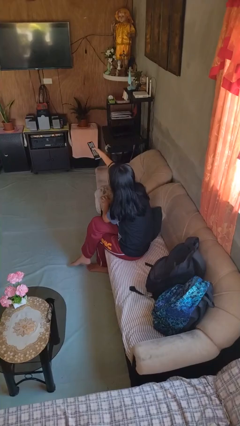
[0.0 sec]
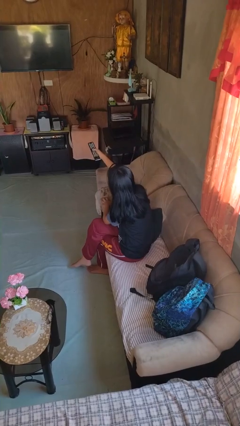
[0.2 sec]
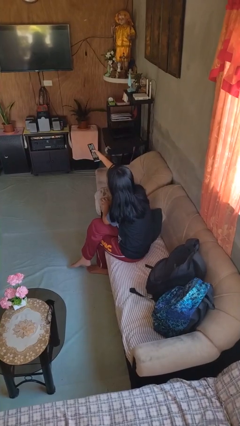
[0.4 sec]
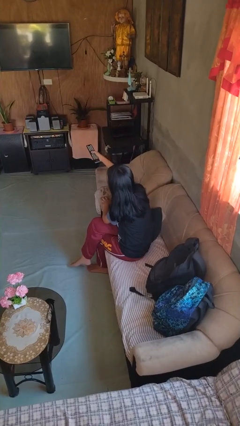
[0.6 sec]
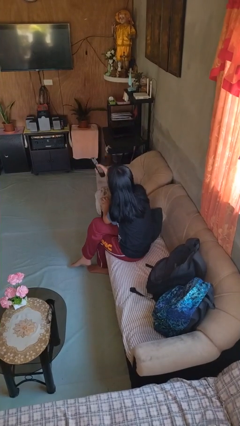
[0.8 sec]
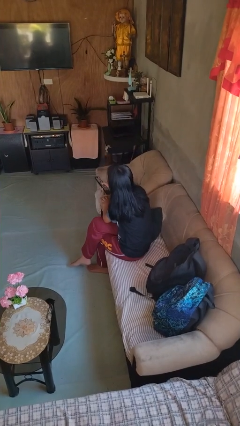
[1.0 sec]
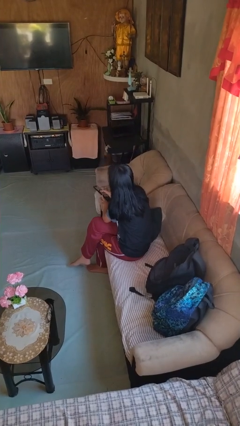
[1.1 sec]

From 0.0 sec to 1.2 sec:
person uses television remote

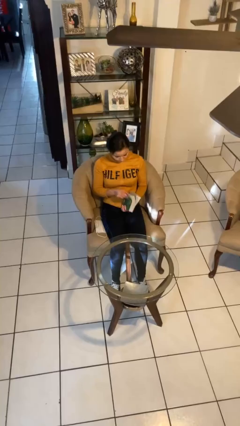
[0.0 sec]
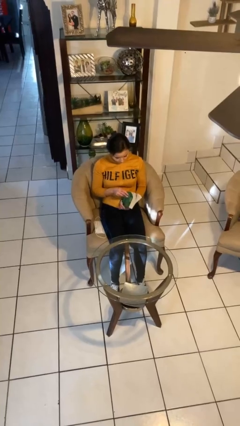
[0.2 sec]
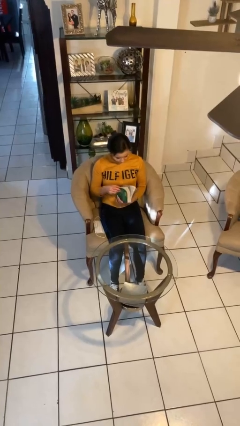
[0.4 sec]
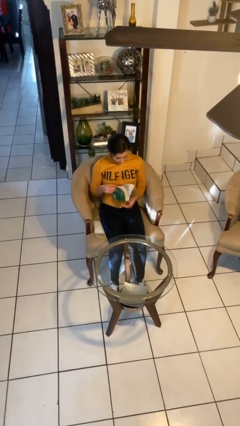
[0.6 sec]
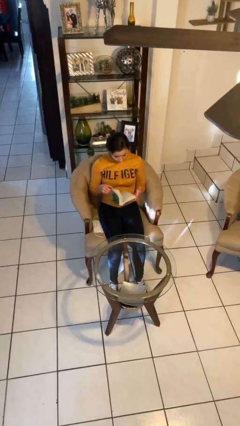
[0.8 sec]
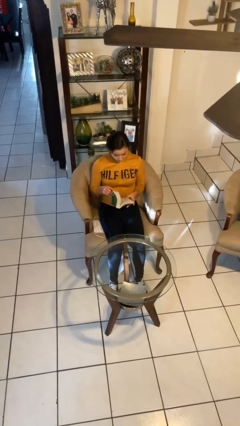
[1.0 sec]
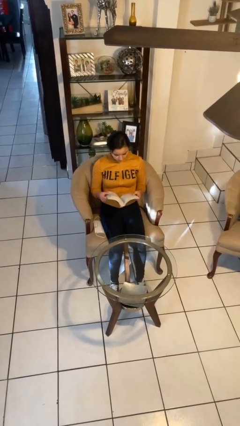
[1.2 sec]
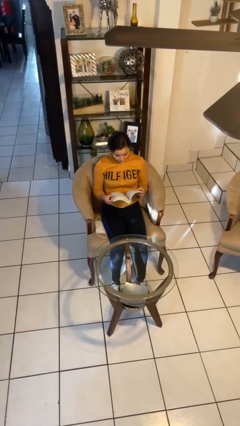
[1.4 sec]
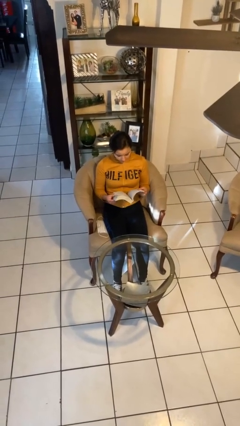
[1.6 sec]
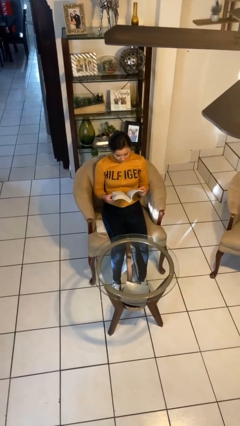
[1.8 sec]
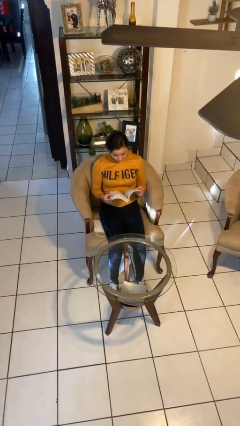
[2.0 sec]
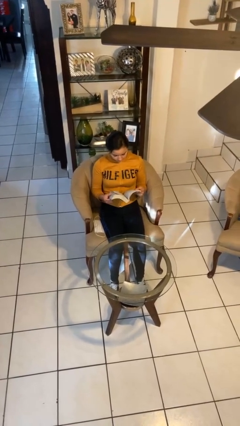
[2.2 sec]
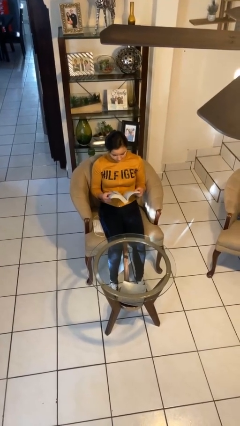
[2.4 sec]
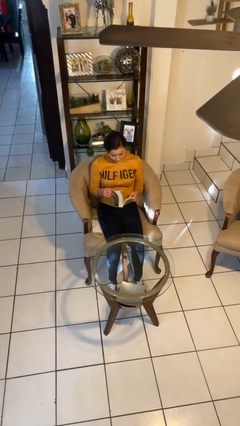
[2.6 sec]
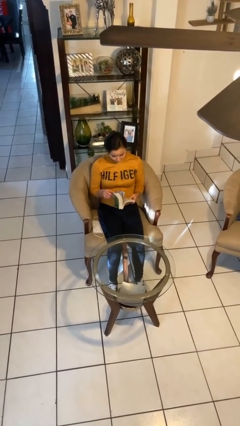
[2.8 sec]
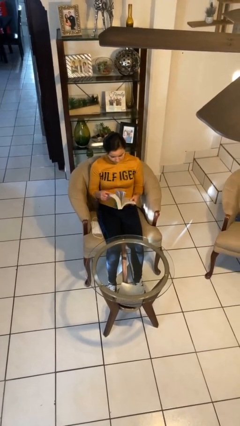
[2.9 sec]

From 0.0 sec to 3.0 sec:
person reads book

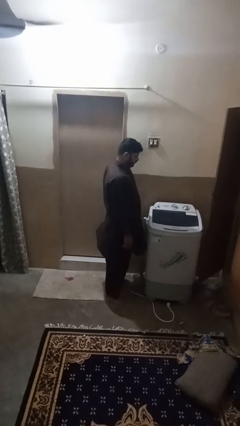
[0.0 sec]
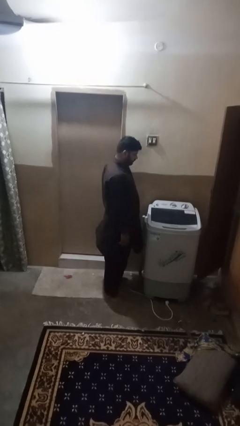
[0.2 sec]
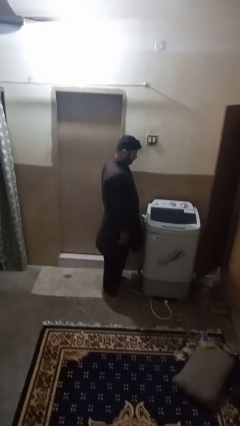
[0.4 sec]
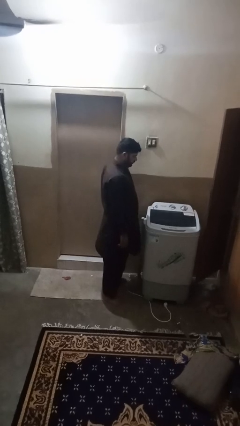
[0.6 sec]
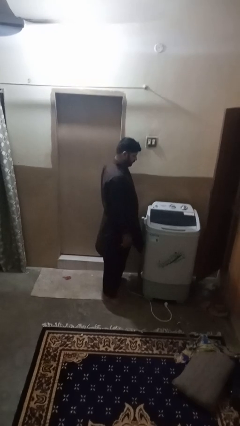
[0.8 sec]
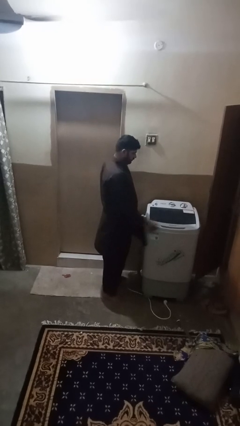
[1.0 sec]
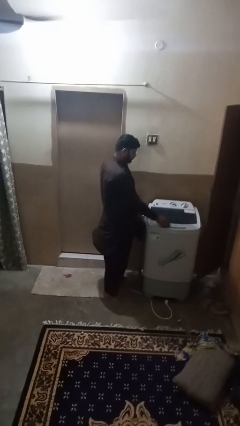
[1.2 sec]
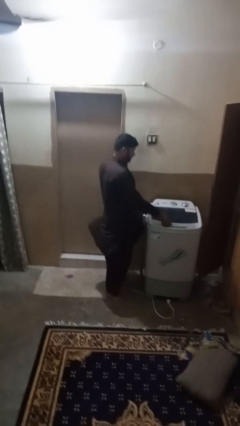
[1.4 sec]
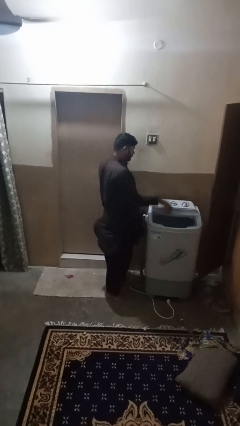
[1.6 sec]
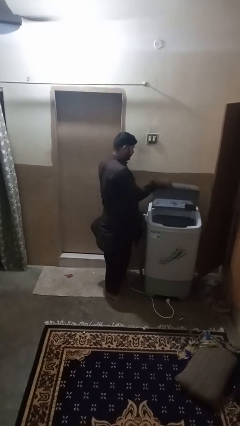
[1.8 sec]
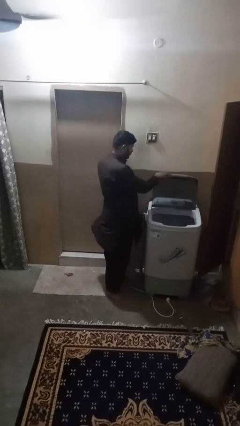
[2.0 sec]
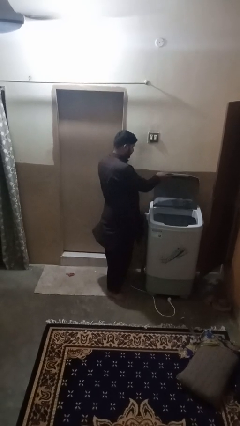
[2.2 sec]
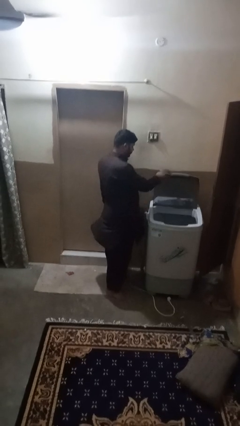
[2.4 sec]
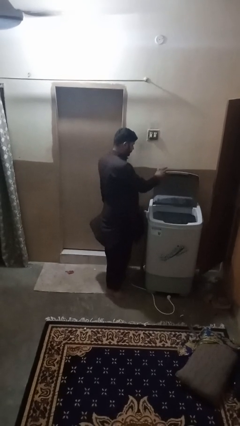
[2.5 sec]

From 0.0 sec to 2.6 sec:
person opens clothes washer

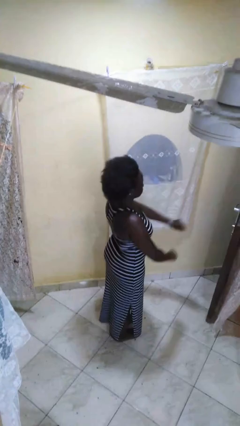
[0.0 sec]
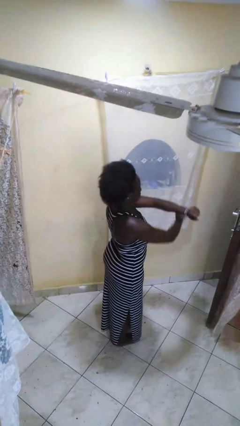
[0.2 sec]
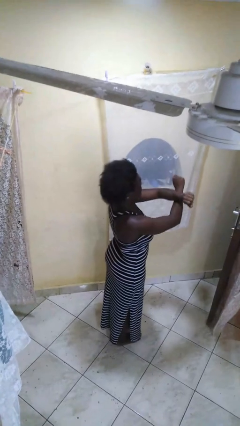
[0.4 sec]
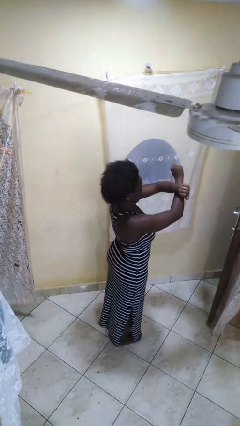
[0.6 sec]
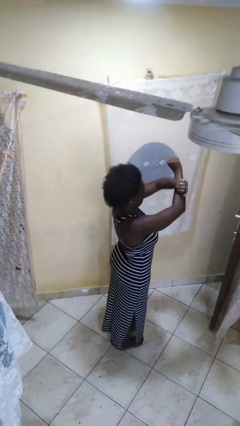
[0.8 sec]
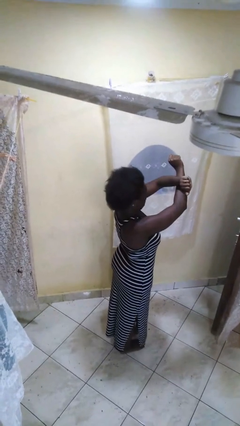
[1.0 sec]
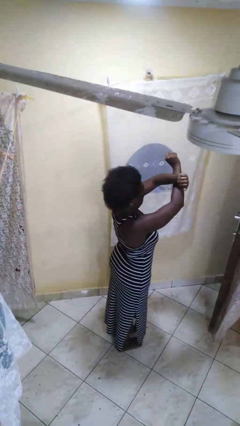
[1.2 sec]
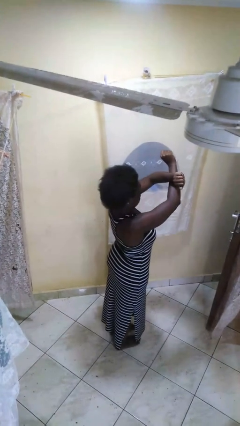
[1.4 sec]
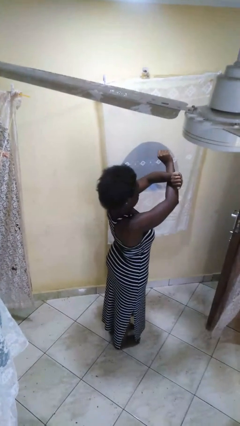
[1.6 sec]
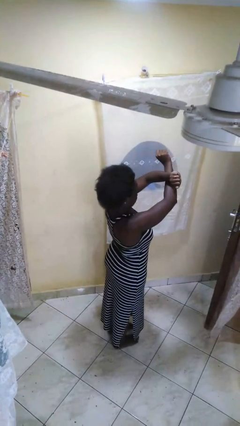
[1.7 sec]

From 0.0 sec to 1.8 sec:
person gestures arms x

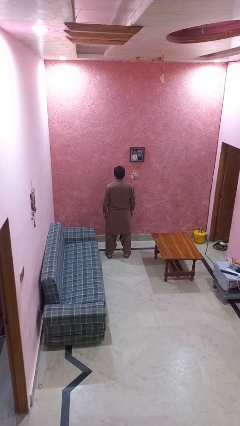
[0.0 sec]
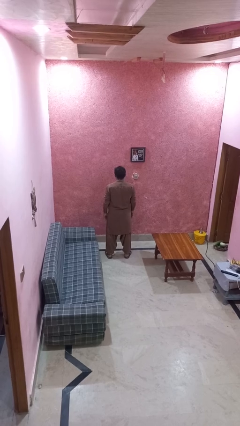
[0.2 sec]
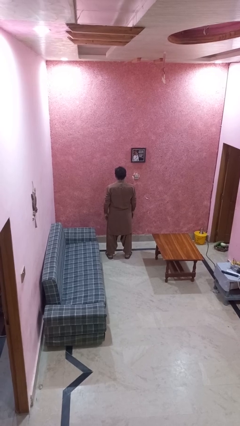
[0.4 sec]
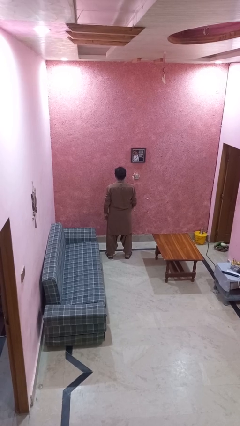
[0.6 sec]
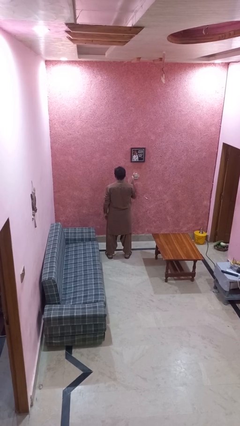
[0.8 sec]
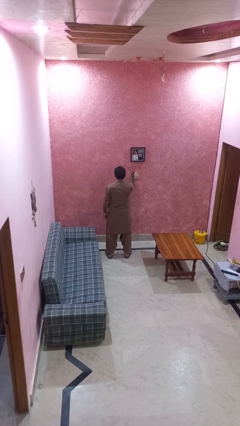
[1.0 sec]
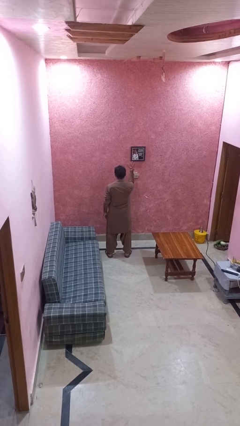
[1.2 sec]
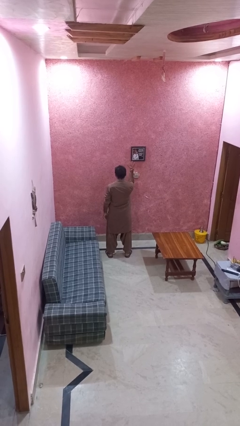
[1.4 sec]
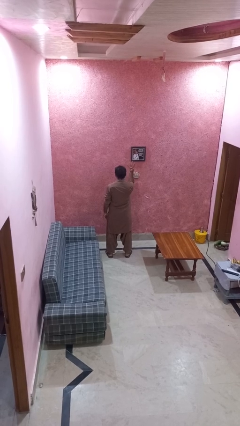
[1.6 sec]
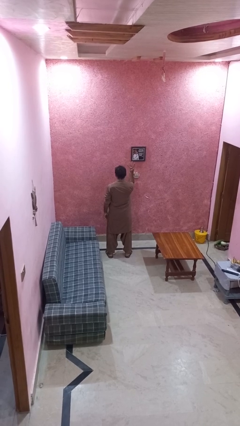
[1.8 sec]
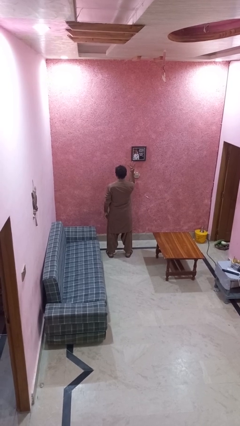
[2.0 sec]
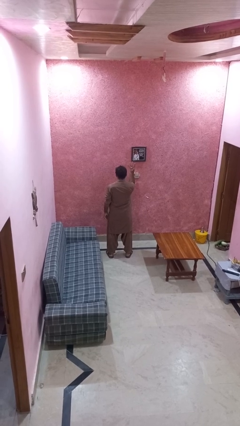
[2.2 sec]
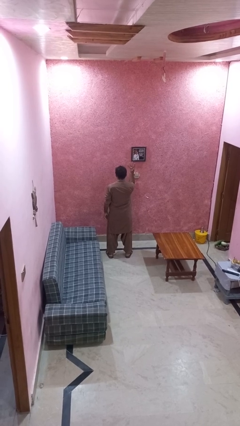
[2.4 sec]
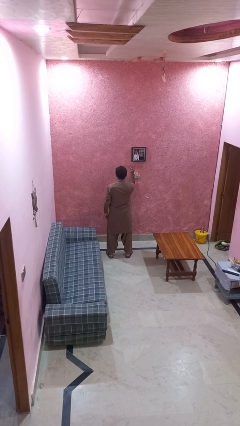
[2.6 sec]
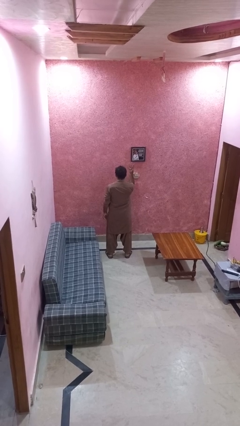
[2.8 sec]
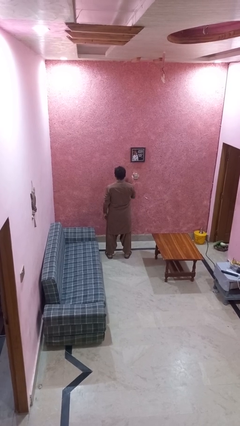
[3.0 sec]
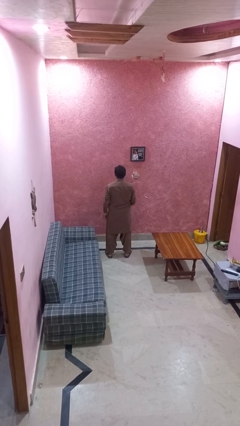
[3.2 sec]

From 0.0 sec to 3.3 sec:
person gestures number four

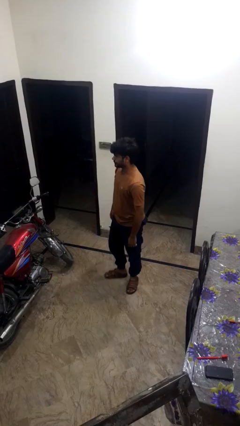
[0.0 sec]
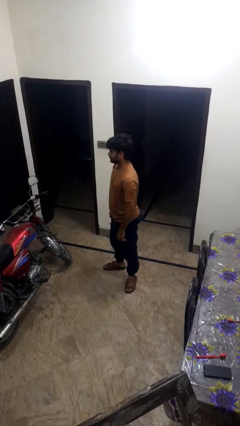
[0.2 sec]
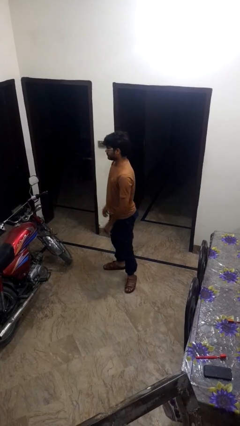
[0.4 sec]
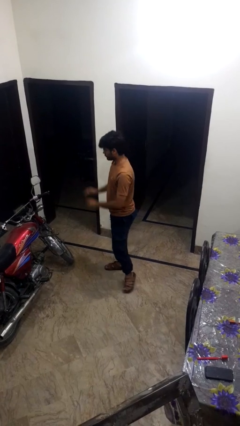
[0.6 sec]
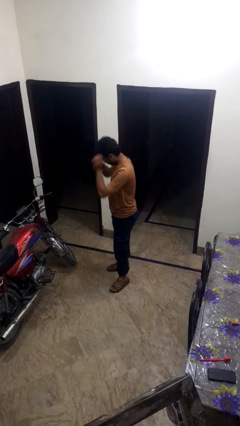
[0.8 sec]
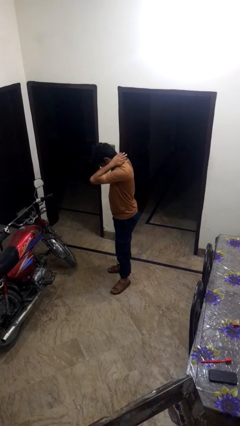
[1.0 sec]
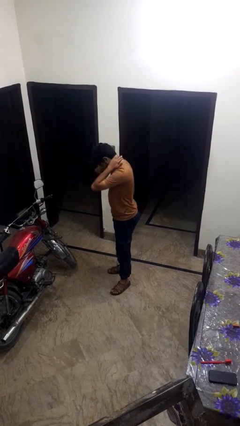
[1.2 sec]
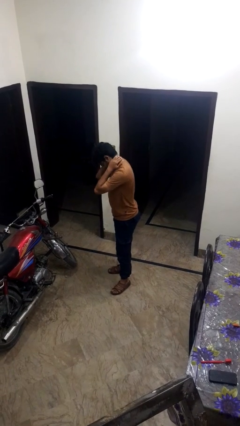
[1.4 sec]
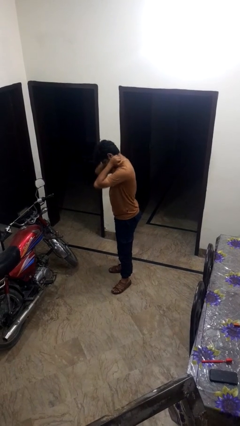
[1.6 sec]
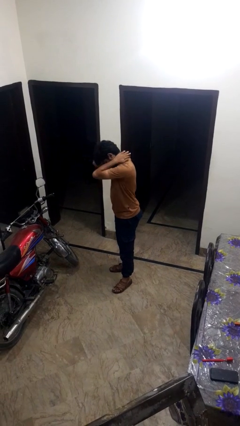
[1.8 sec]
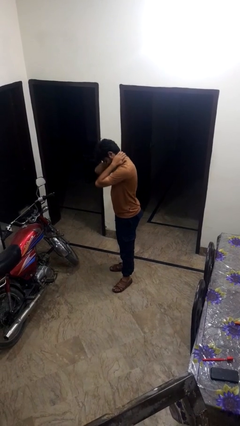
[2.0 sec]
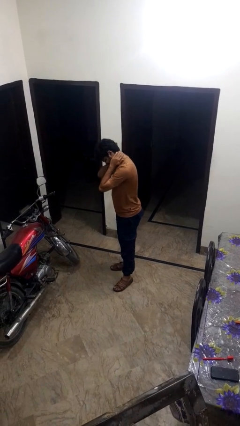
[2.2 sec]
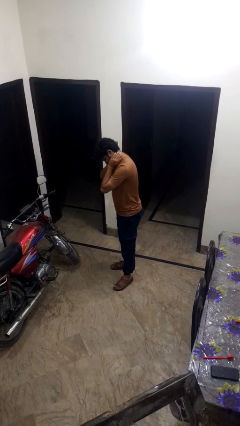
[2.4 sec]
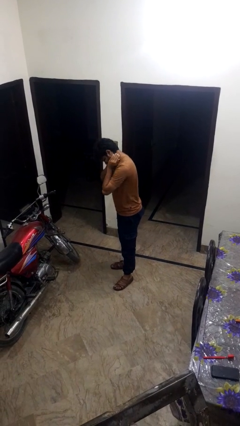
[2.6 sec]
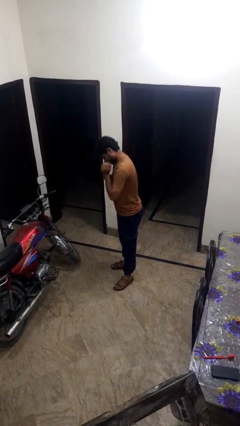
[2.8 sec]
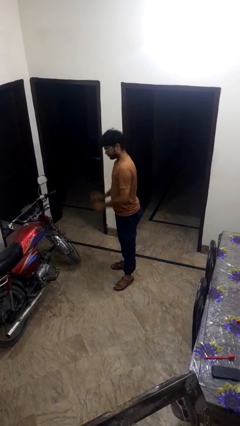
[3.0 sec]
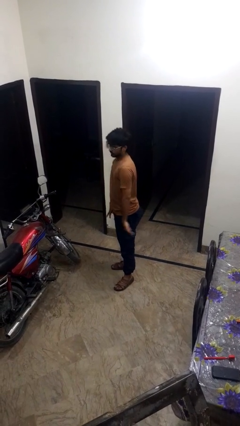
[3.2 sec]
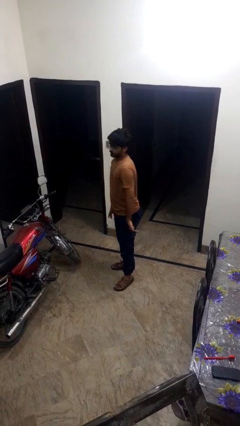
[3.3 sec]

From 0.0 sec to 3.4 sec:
person rubs neck

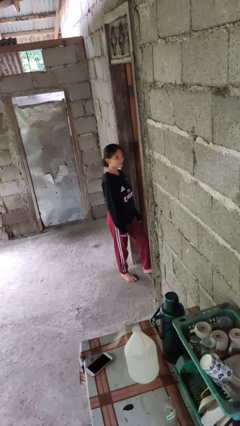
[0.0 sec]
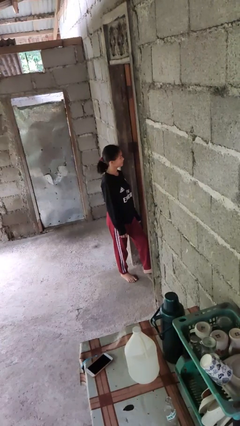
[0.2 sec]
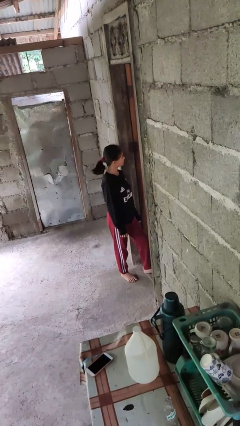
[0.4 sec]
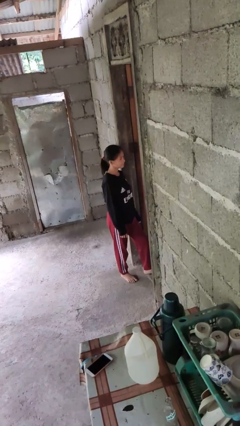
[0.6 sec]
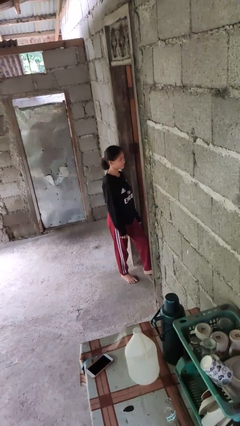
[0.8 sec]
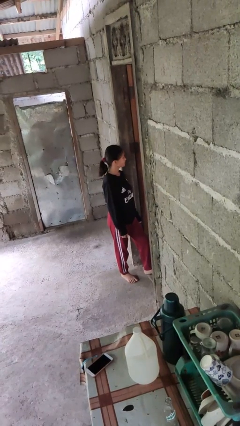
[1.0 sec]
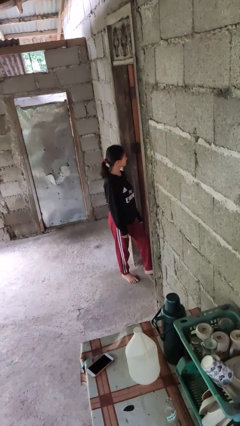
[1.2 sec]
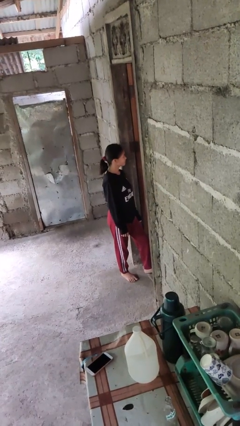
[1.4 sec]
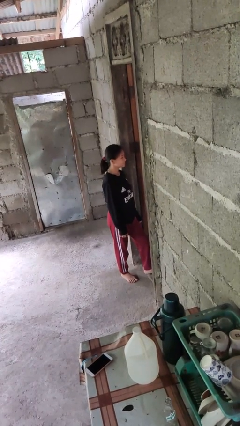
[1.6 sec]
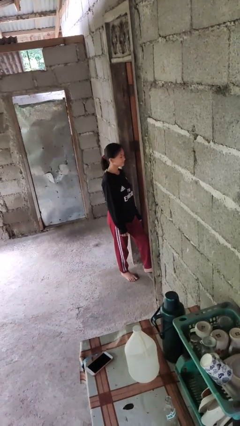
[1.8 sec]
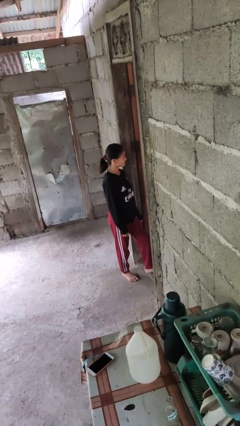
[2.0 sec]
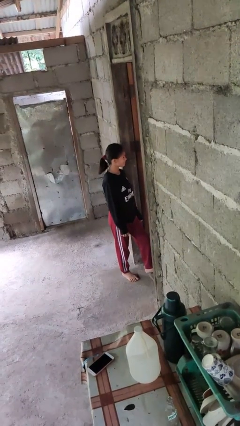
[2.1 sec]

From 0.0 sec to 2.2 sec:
person shakes head
